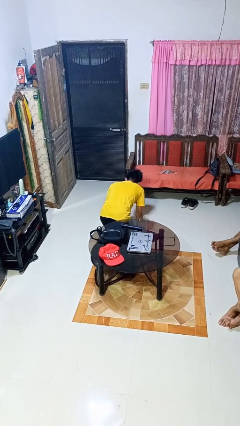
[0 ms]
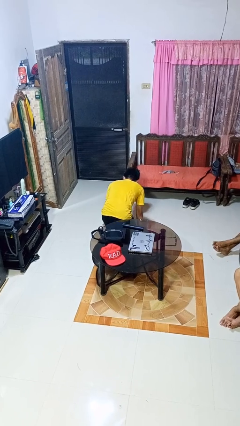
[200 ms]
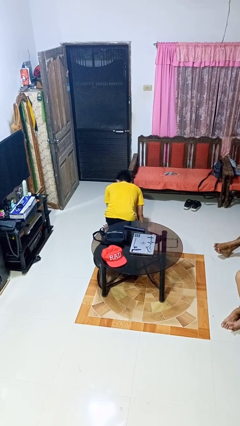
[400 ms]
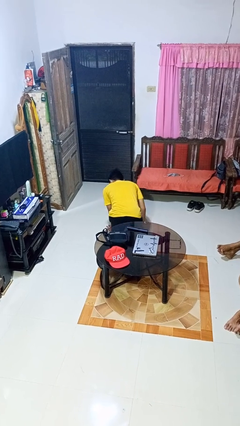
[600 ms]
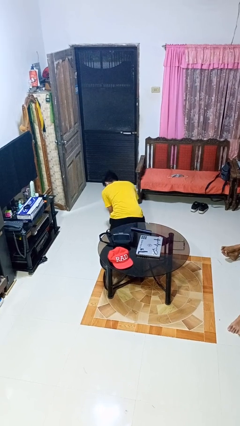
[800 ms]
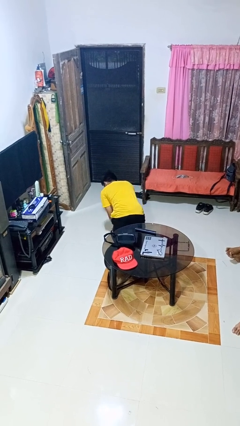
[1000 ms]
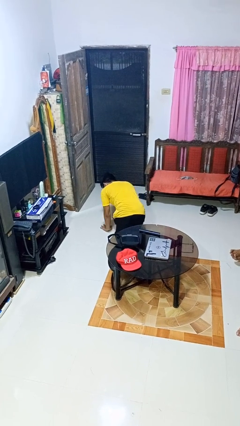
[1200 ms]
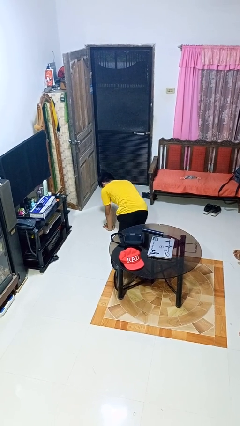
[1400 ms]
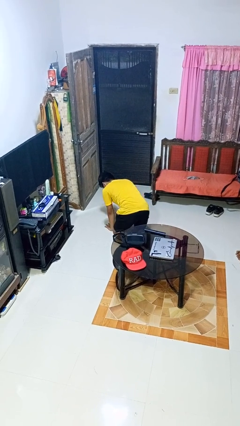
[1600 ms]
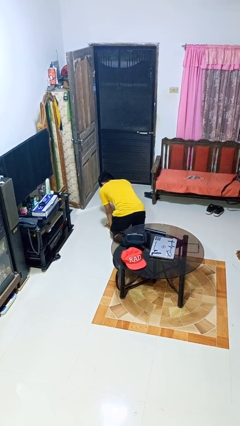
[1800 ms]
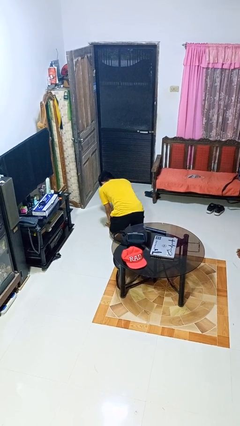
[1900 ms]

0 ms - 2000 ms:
person crawls

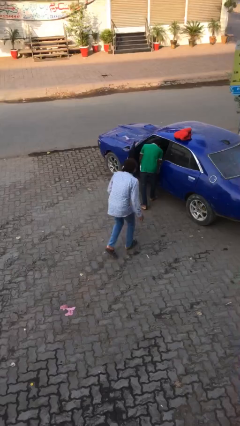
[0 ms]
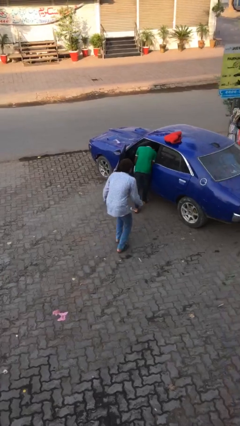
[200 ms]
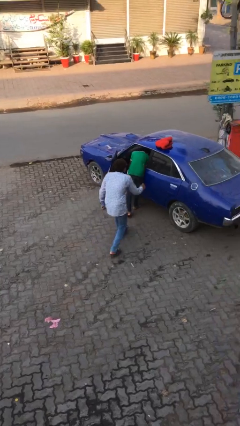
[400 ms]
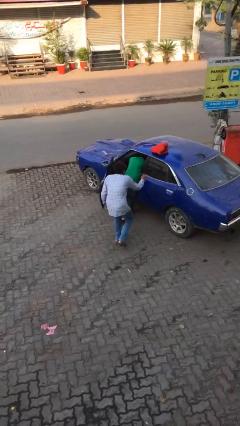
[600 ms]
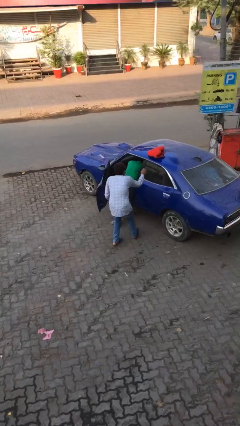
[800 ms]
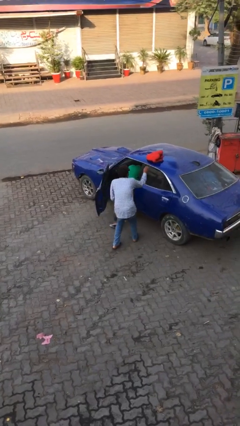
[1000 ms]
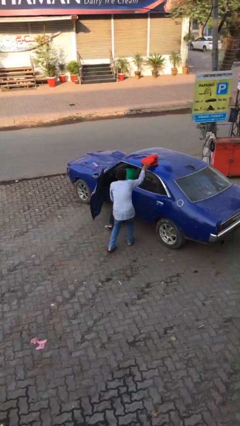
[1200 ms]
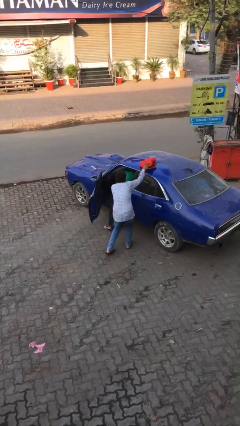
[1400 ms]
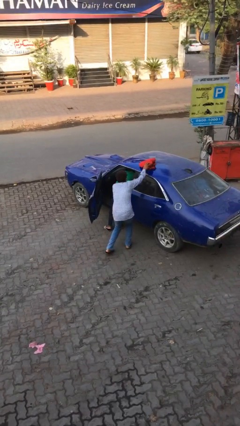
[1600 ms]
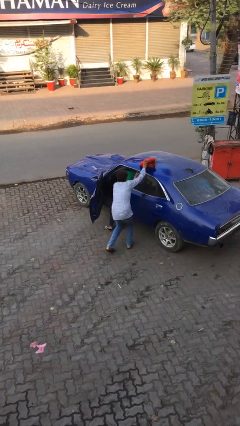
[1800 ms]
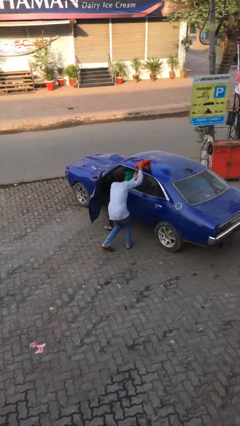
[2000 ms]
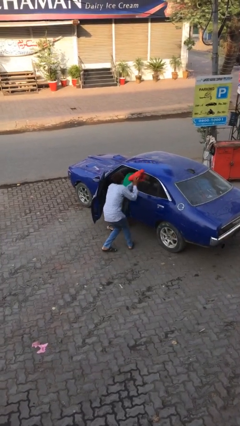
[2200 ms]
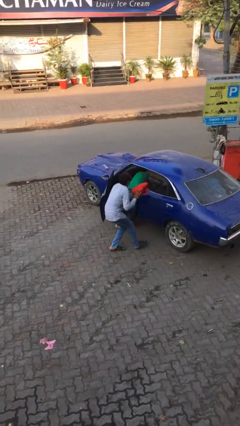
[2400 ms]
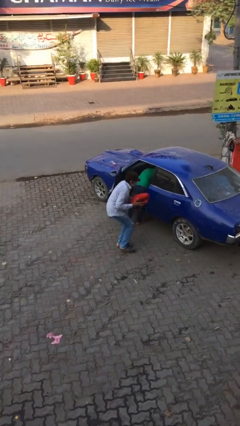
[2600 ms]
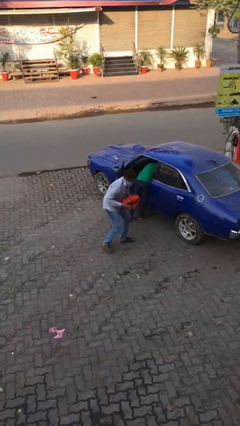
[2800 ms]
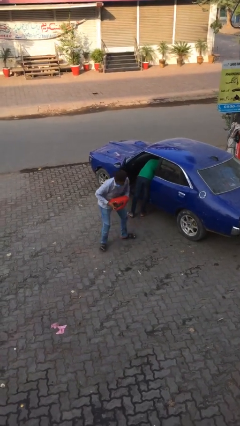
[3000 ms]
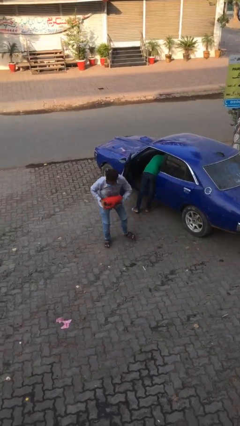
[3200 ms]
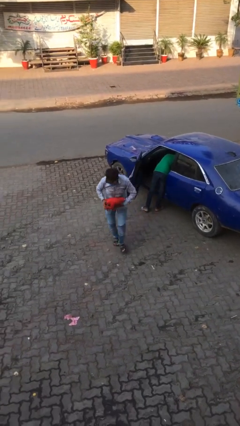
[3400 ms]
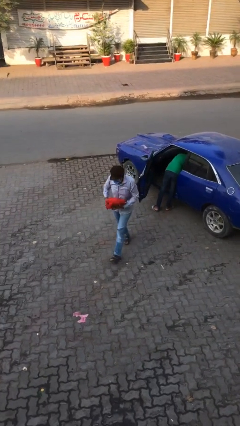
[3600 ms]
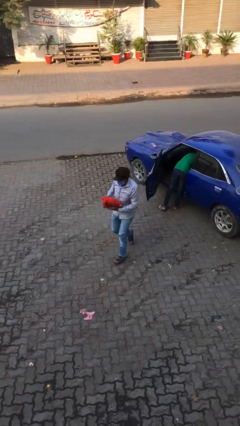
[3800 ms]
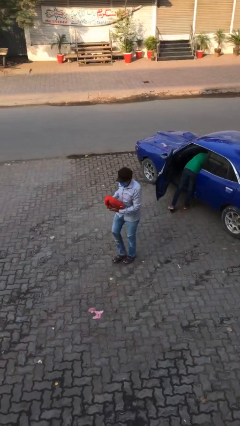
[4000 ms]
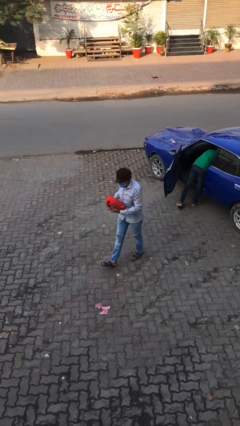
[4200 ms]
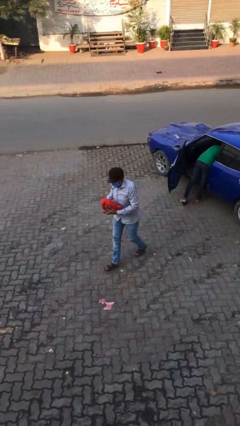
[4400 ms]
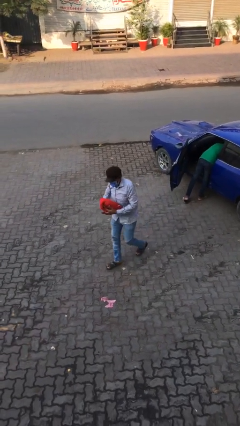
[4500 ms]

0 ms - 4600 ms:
person steals object from person

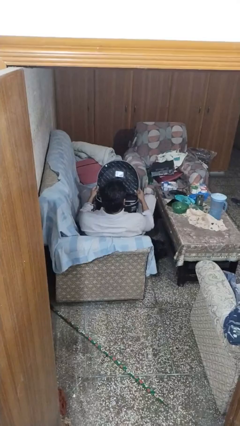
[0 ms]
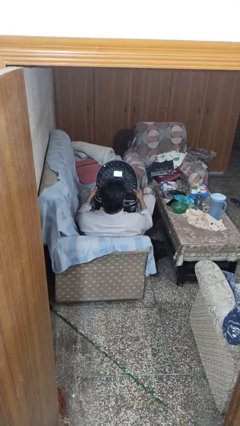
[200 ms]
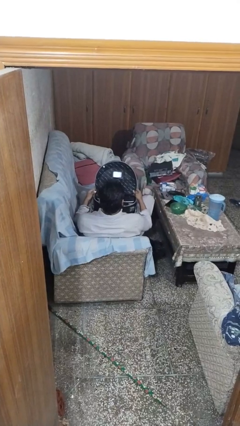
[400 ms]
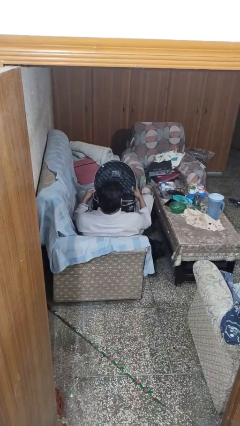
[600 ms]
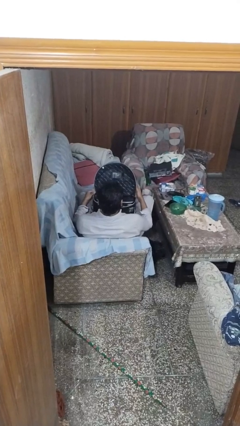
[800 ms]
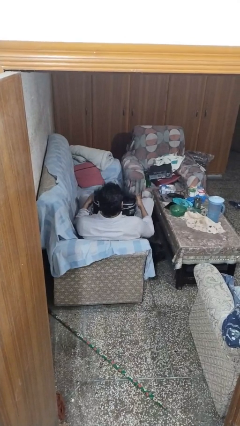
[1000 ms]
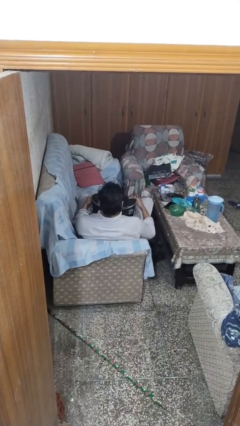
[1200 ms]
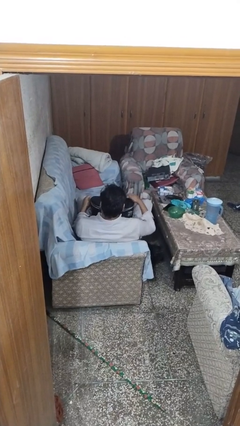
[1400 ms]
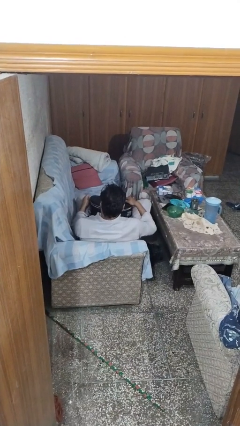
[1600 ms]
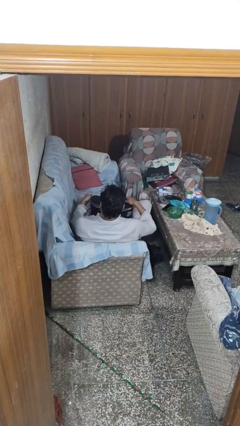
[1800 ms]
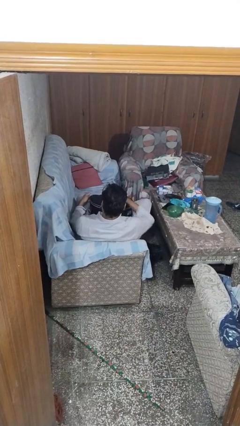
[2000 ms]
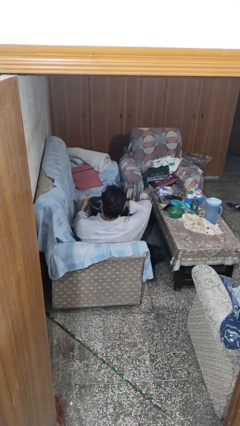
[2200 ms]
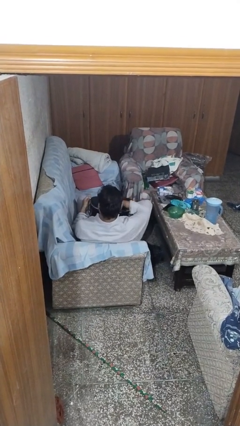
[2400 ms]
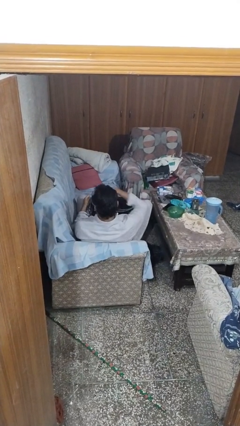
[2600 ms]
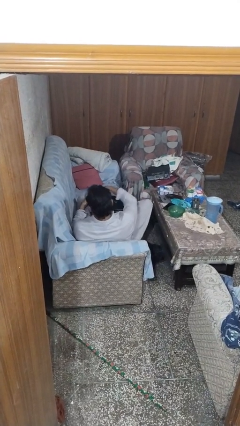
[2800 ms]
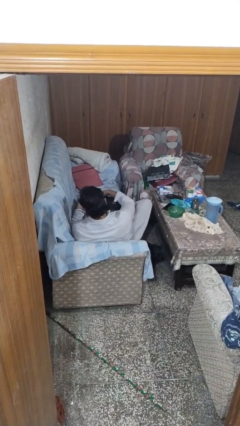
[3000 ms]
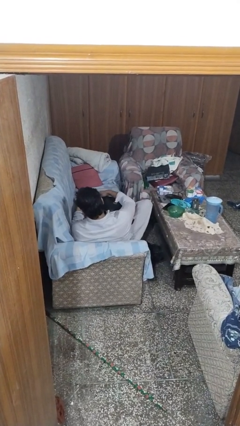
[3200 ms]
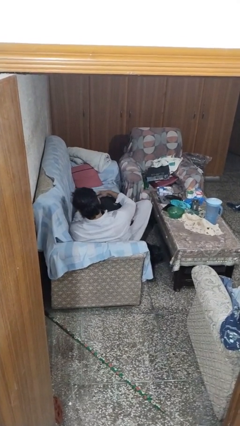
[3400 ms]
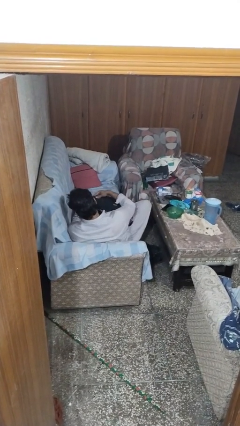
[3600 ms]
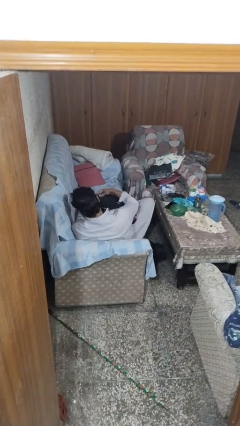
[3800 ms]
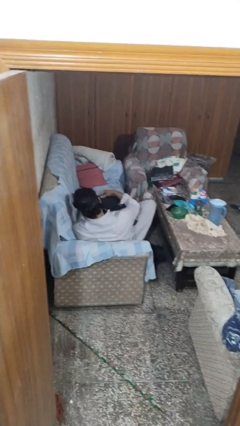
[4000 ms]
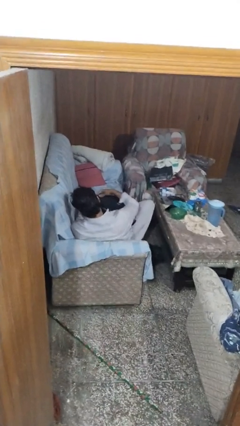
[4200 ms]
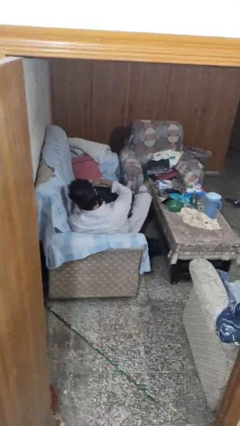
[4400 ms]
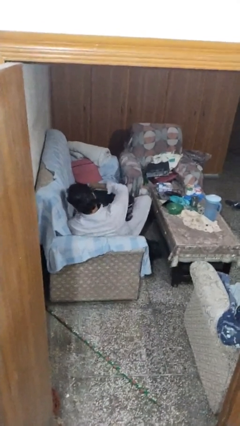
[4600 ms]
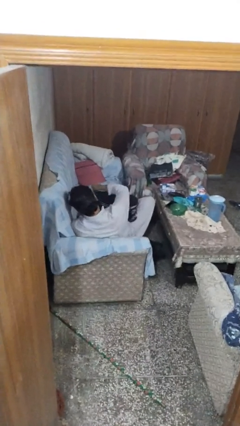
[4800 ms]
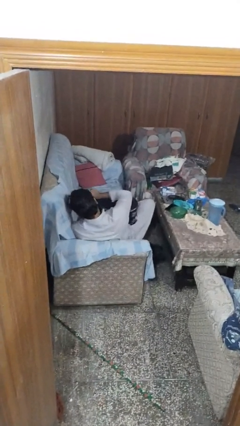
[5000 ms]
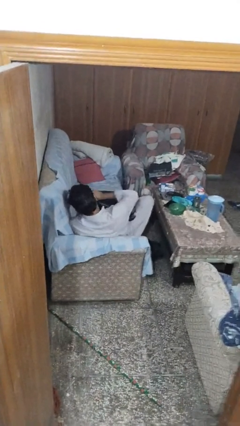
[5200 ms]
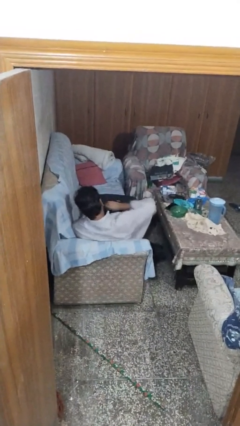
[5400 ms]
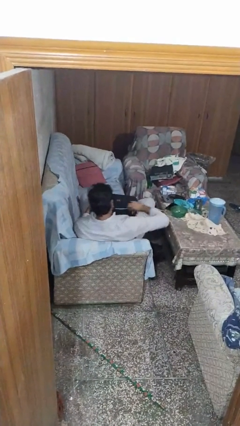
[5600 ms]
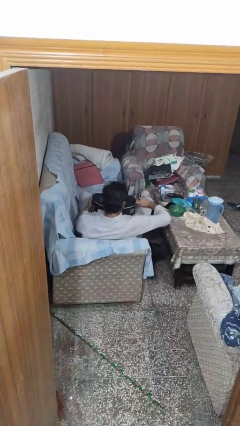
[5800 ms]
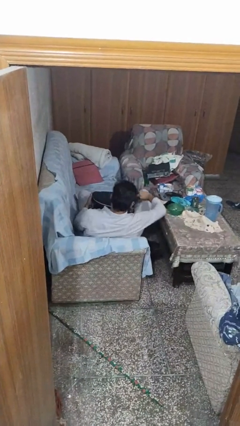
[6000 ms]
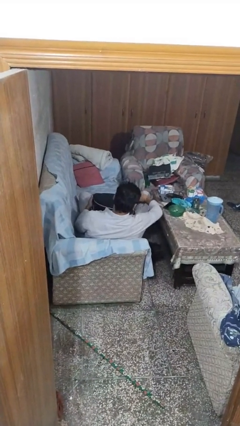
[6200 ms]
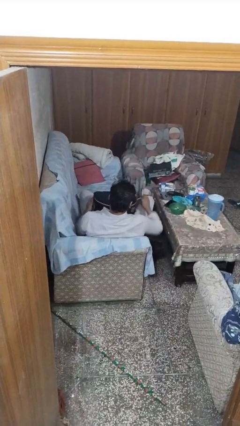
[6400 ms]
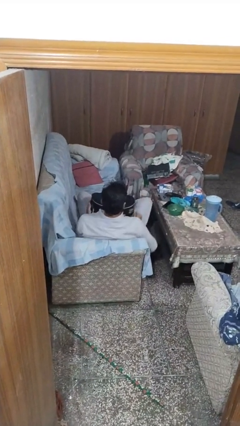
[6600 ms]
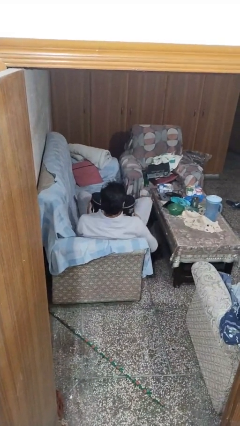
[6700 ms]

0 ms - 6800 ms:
person closes suitcase

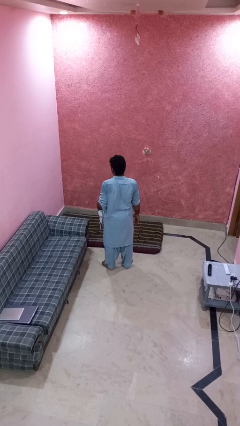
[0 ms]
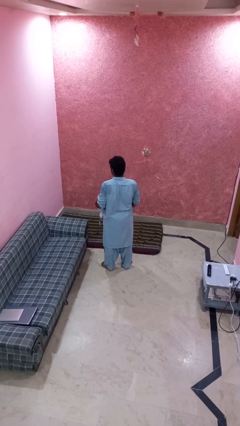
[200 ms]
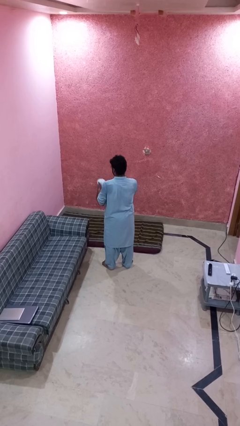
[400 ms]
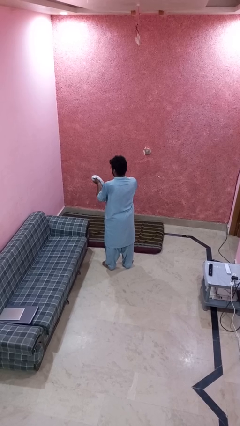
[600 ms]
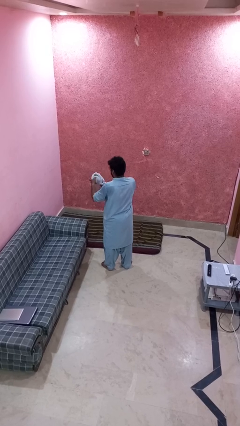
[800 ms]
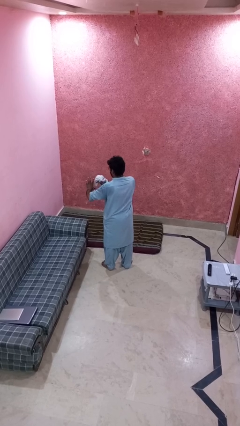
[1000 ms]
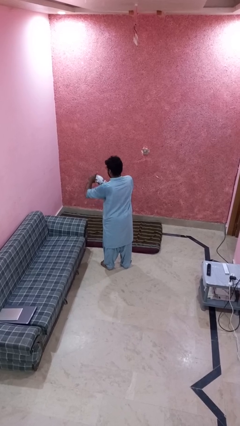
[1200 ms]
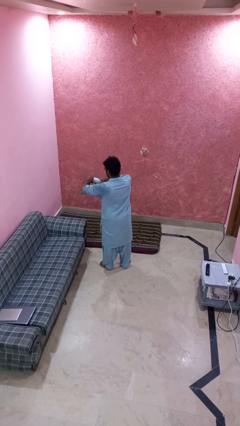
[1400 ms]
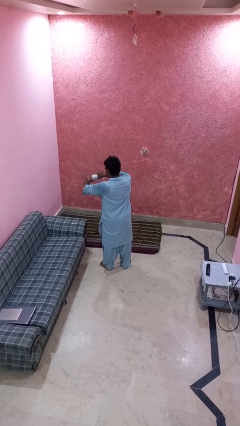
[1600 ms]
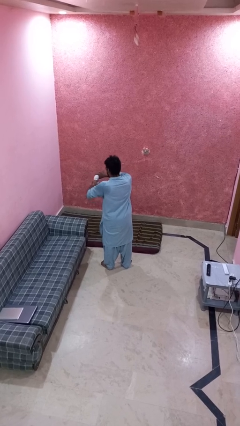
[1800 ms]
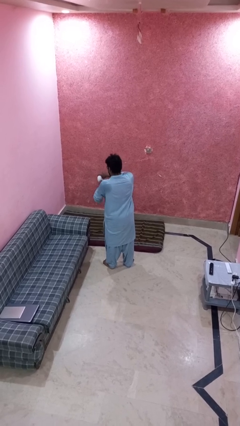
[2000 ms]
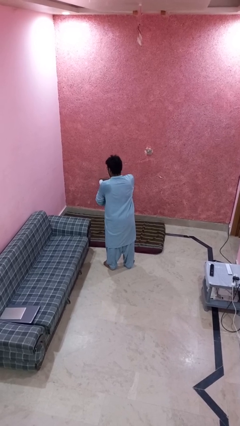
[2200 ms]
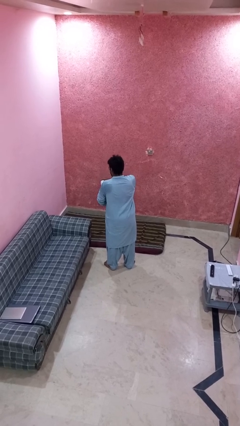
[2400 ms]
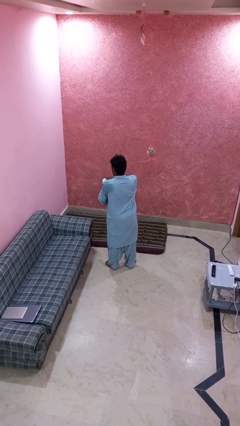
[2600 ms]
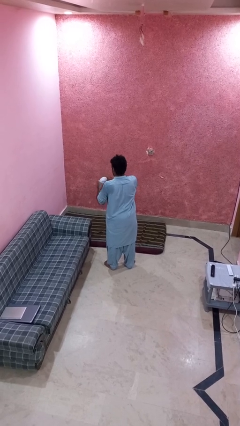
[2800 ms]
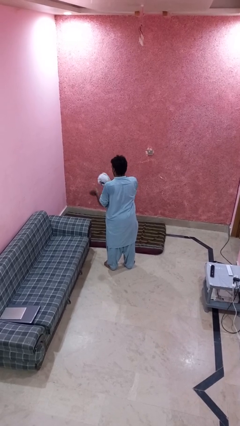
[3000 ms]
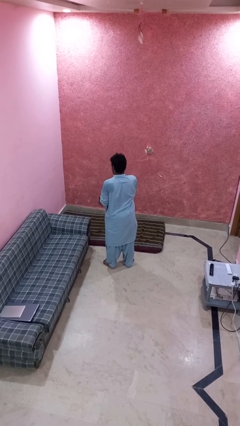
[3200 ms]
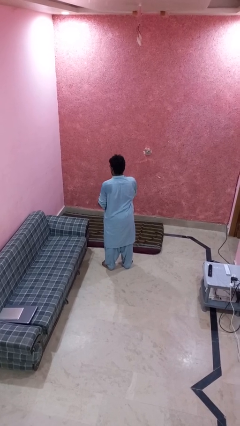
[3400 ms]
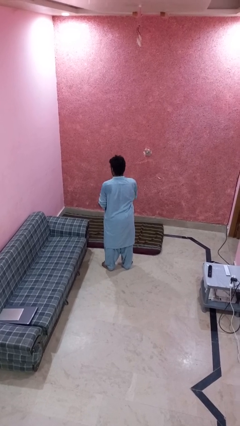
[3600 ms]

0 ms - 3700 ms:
person squeezes object

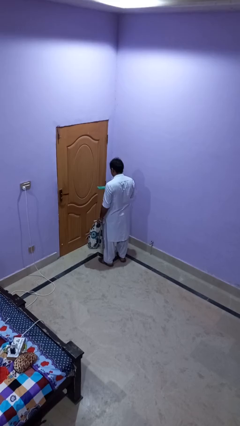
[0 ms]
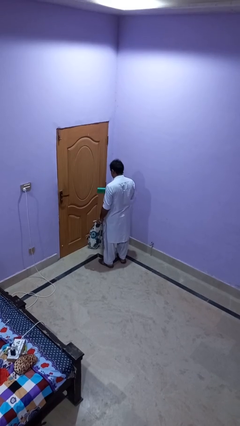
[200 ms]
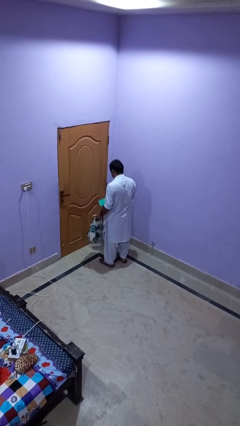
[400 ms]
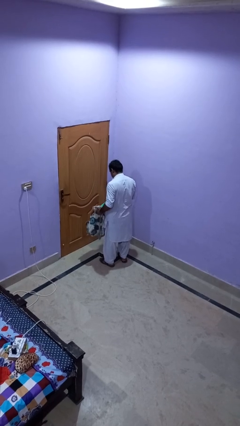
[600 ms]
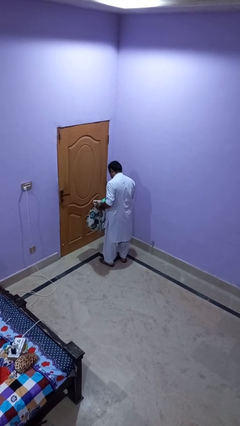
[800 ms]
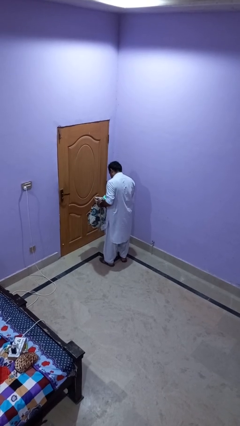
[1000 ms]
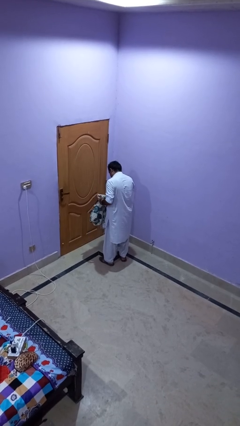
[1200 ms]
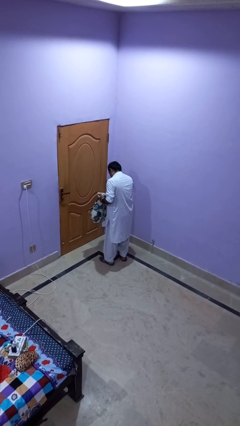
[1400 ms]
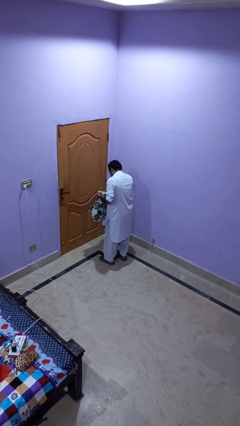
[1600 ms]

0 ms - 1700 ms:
person puts object into backpack
